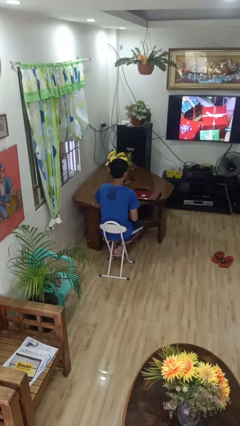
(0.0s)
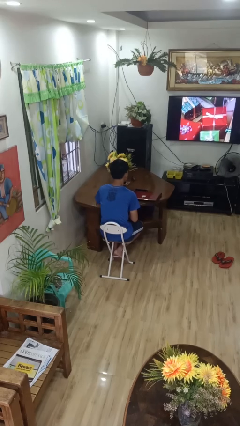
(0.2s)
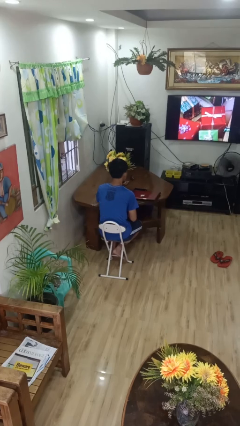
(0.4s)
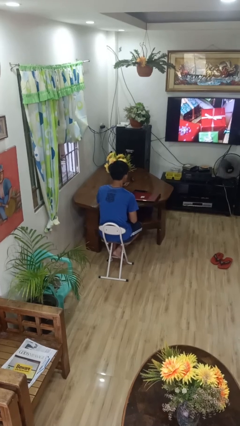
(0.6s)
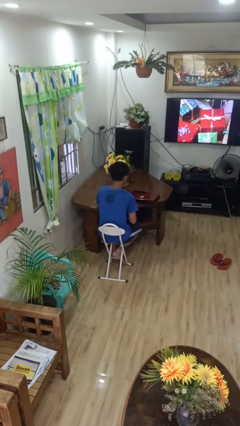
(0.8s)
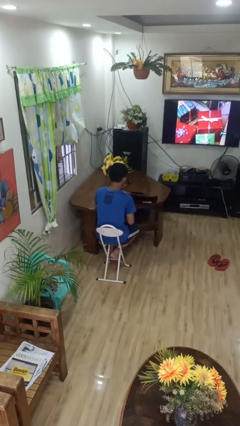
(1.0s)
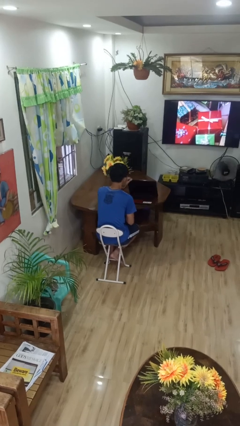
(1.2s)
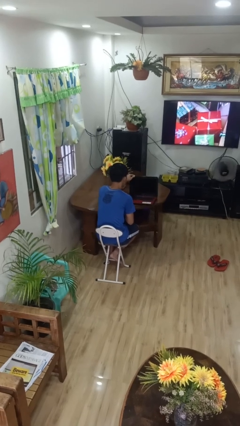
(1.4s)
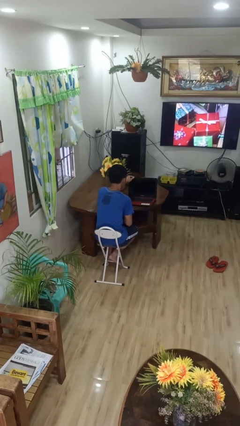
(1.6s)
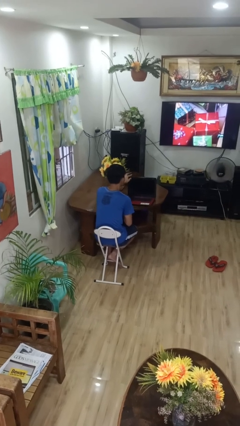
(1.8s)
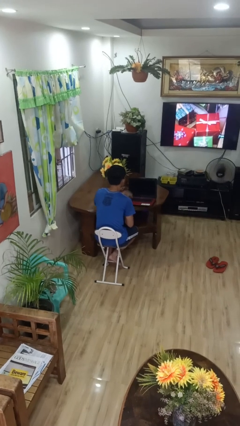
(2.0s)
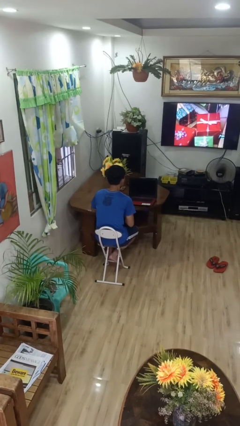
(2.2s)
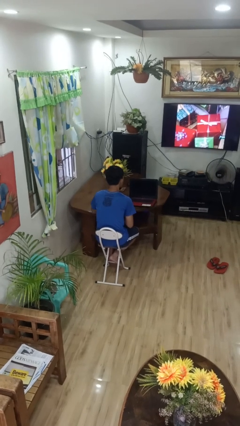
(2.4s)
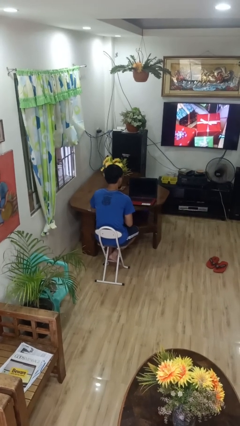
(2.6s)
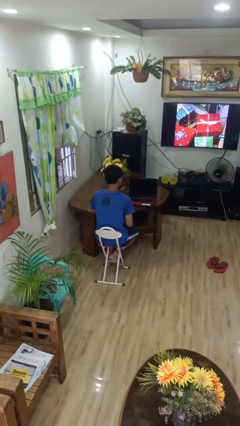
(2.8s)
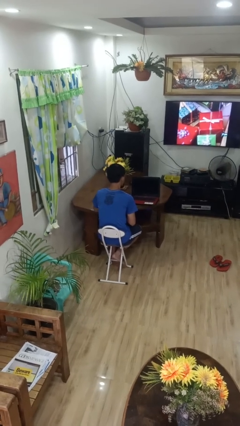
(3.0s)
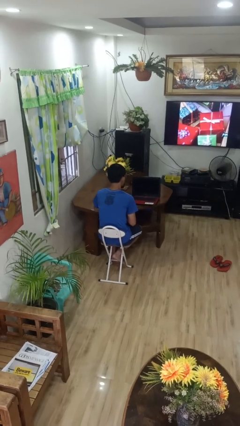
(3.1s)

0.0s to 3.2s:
person opens laptop

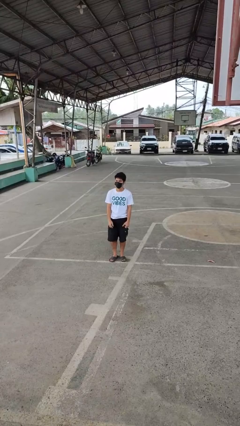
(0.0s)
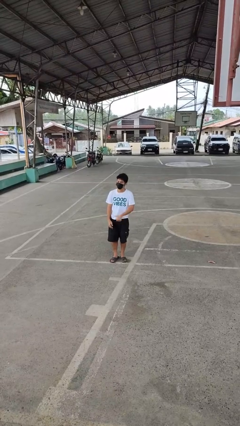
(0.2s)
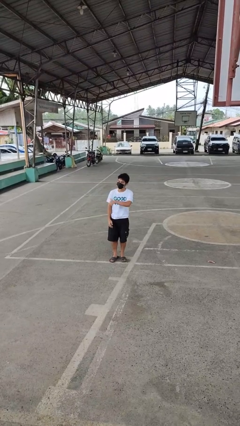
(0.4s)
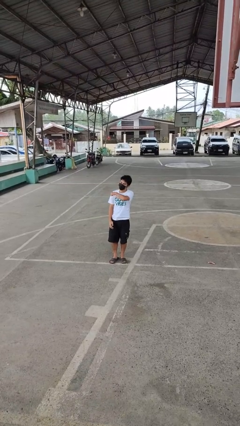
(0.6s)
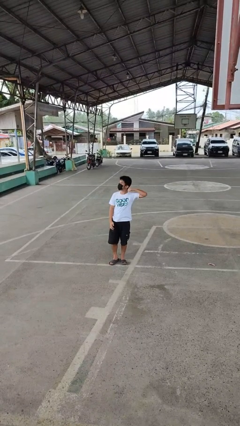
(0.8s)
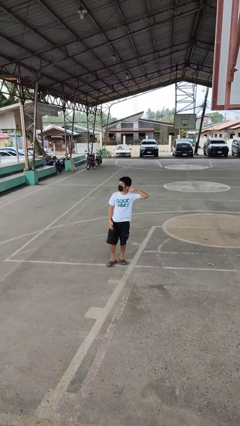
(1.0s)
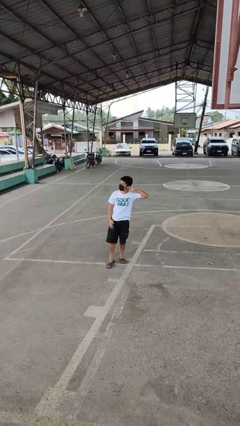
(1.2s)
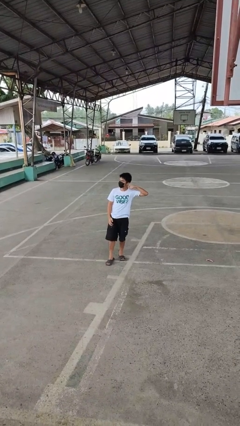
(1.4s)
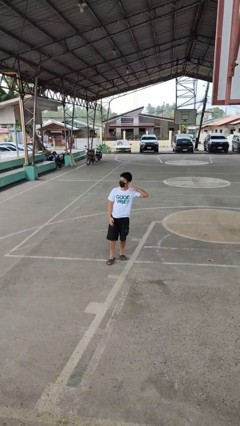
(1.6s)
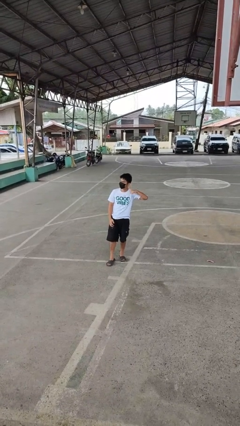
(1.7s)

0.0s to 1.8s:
person gestures cut

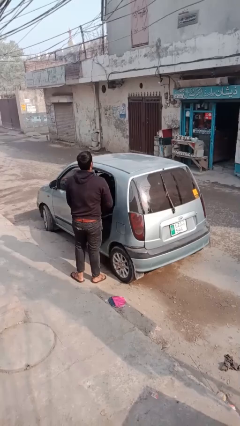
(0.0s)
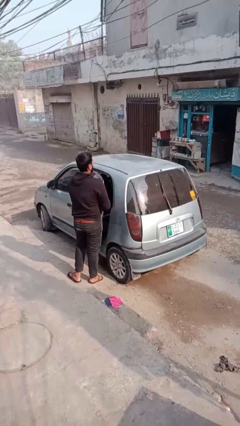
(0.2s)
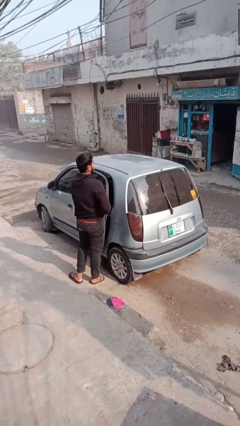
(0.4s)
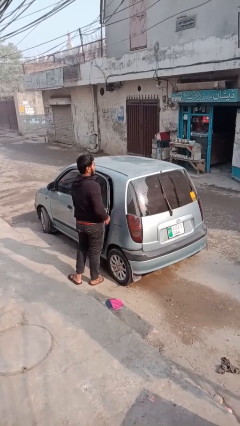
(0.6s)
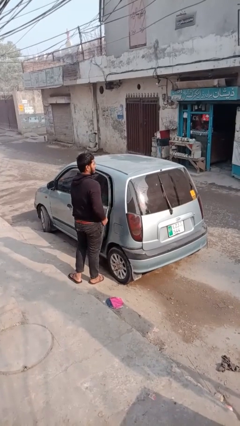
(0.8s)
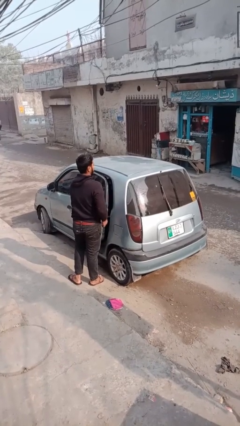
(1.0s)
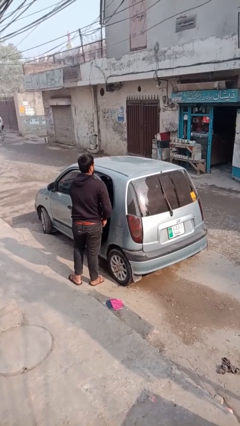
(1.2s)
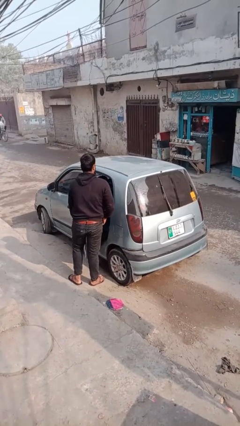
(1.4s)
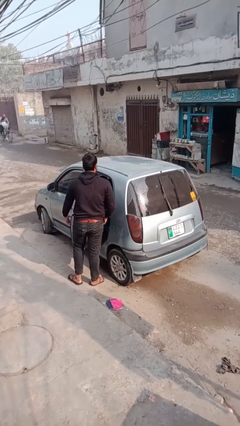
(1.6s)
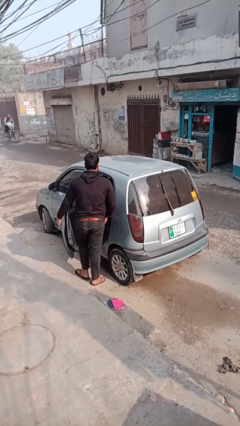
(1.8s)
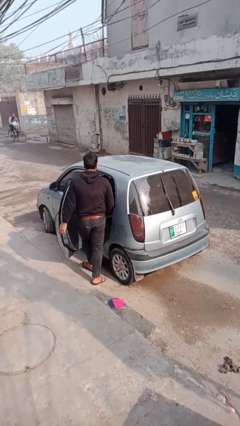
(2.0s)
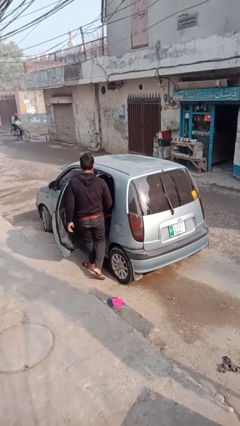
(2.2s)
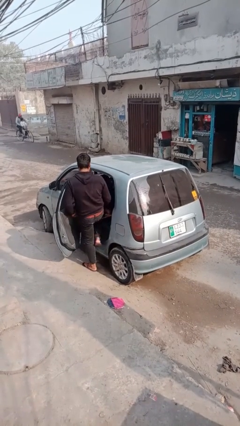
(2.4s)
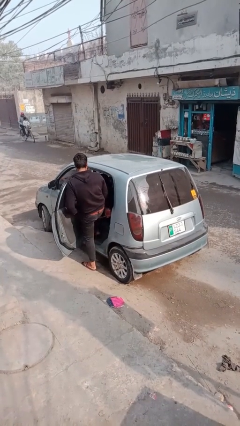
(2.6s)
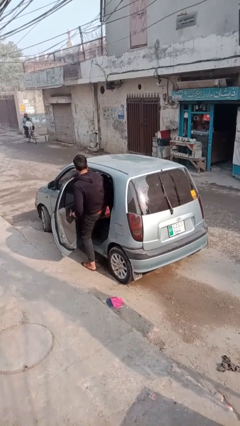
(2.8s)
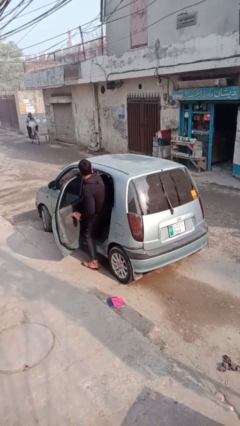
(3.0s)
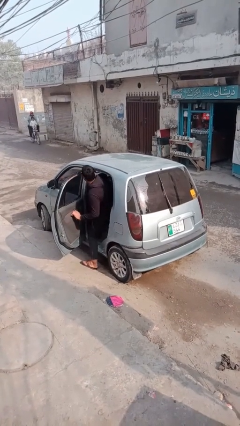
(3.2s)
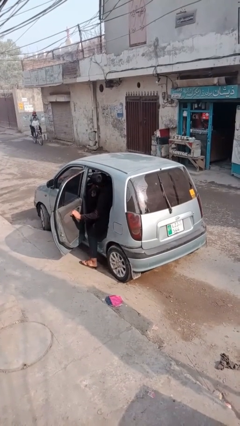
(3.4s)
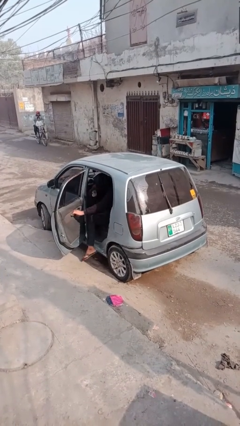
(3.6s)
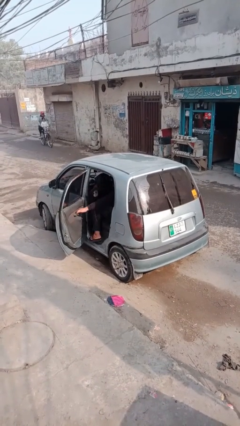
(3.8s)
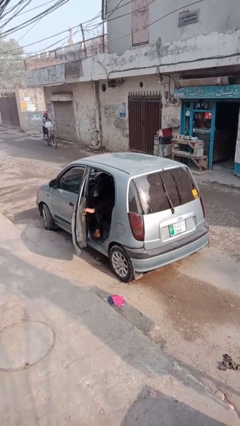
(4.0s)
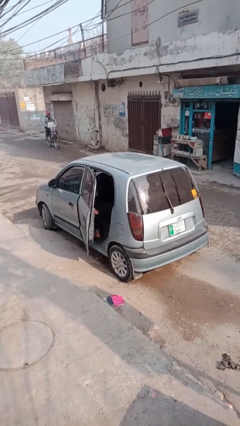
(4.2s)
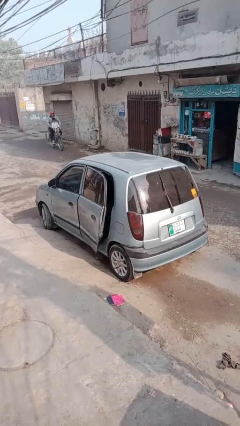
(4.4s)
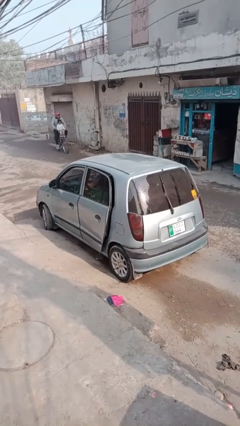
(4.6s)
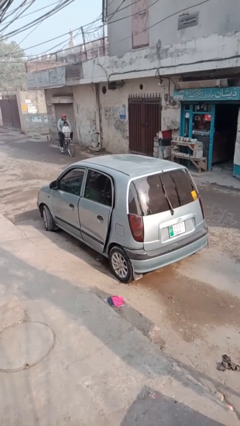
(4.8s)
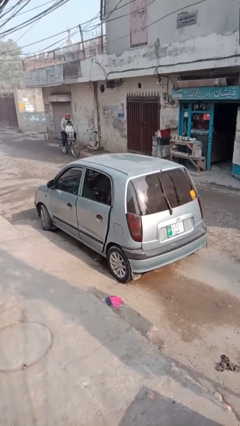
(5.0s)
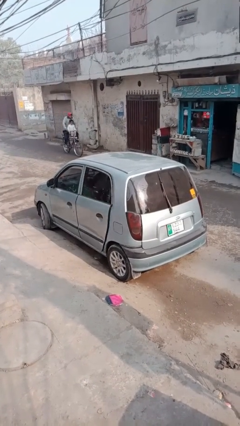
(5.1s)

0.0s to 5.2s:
car picks up person

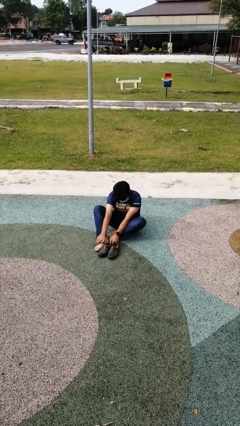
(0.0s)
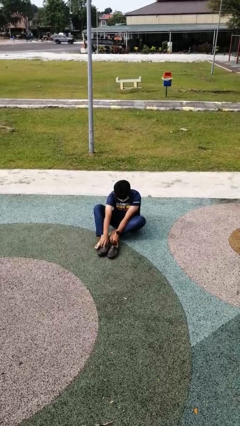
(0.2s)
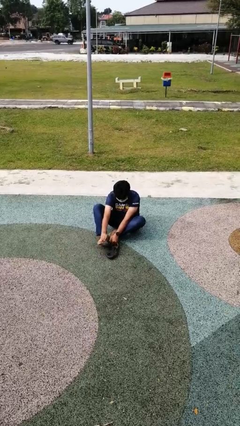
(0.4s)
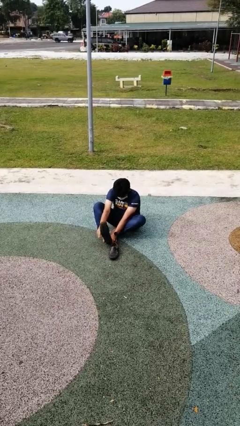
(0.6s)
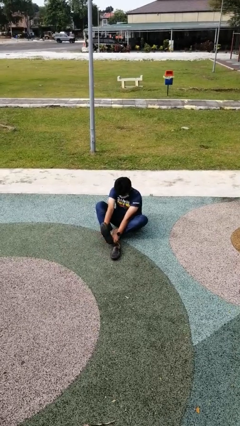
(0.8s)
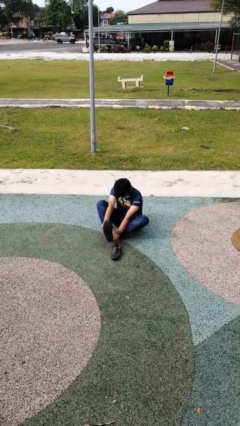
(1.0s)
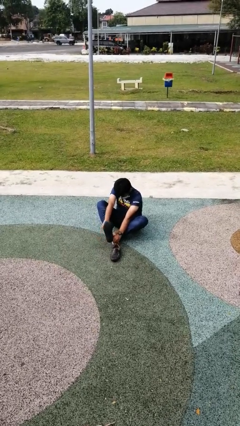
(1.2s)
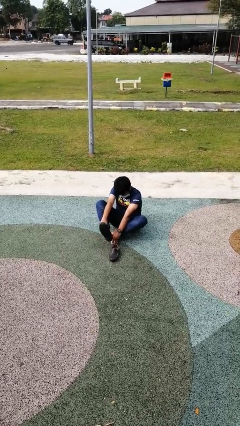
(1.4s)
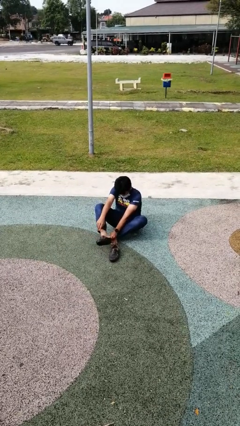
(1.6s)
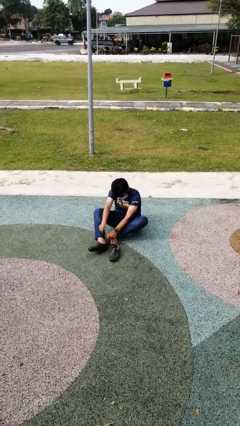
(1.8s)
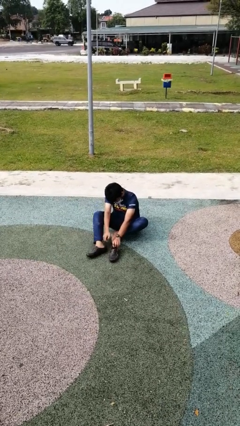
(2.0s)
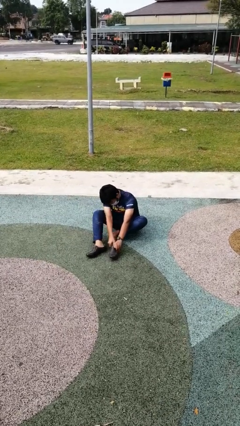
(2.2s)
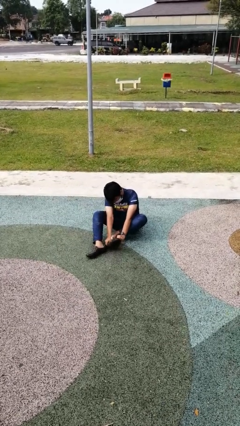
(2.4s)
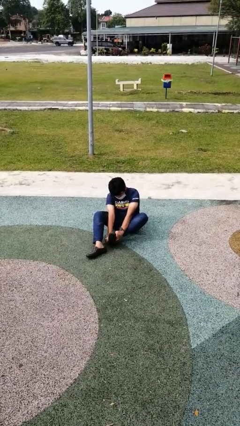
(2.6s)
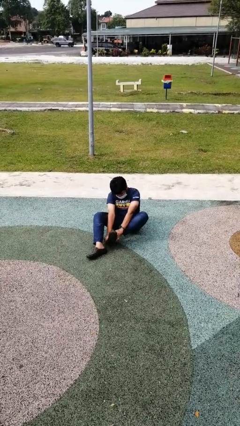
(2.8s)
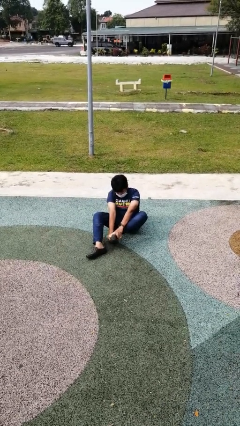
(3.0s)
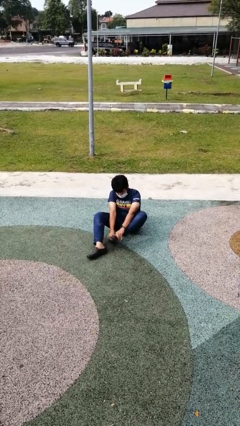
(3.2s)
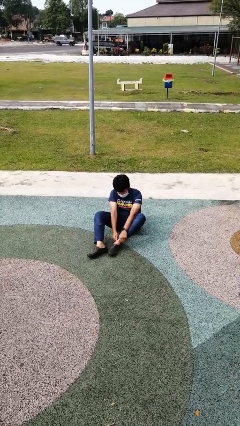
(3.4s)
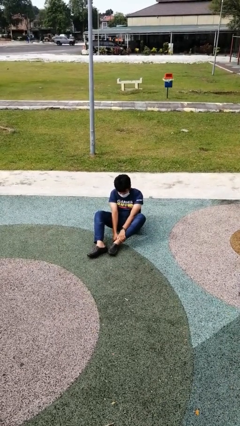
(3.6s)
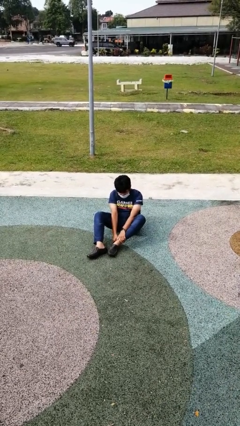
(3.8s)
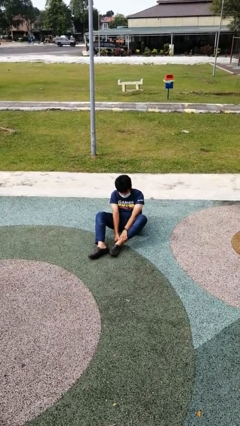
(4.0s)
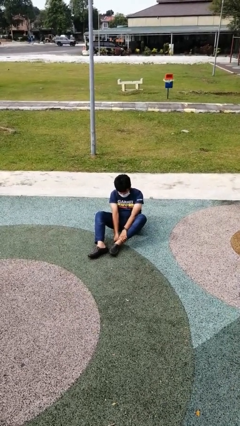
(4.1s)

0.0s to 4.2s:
person puts on shoes

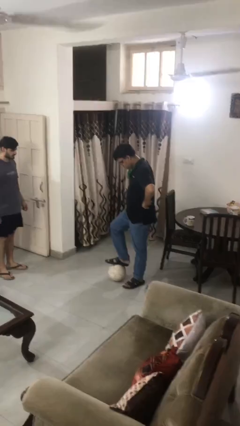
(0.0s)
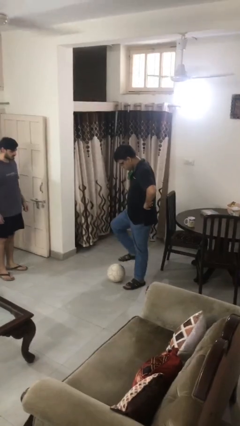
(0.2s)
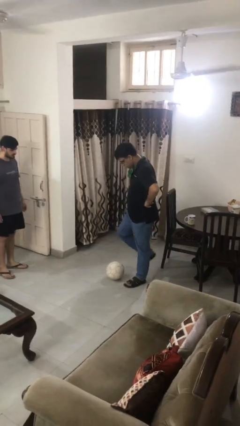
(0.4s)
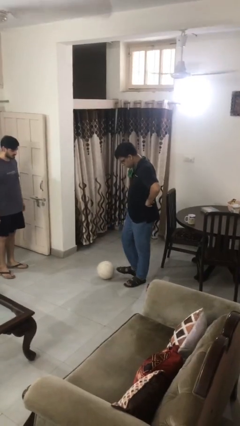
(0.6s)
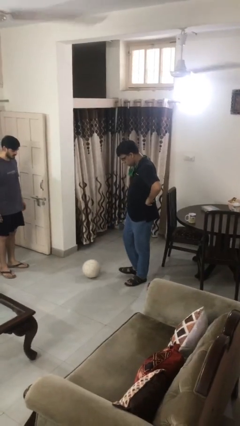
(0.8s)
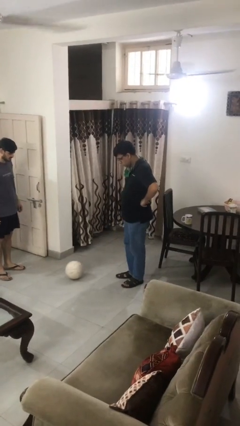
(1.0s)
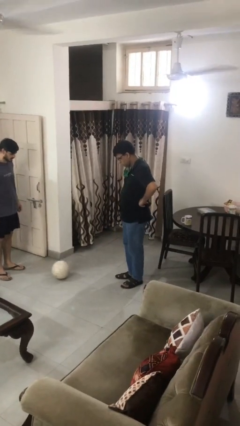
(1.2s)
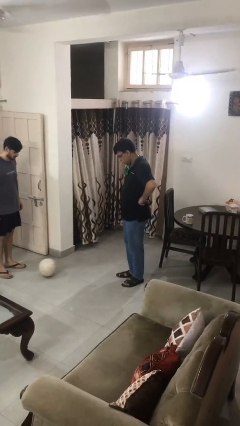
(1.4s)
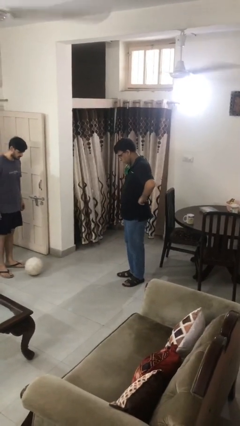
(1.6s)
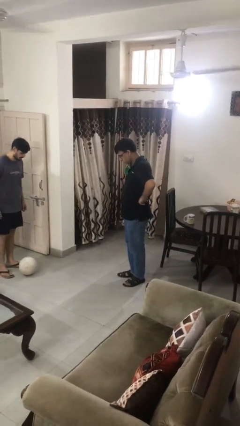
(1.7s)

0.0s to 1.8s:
person kicks object to person

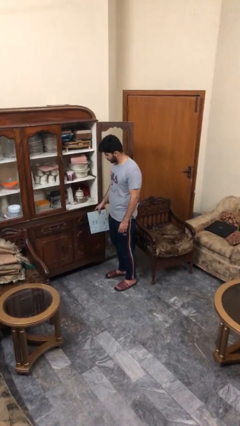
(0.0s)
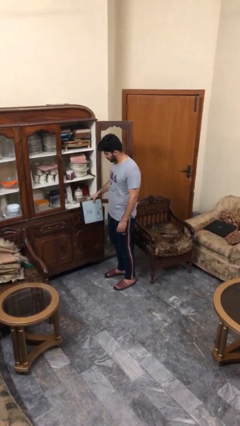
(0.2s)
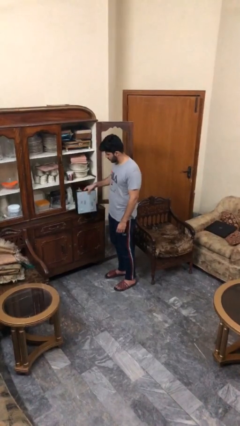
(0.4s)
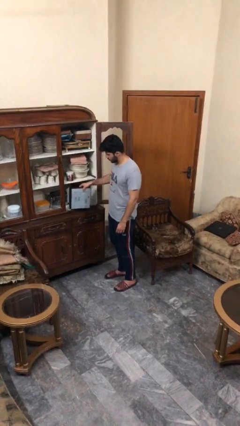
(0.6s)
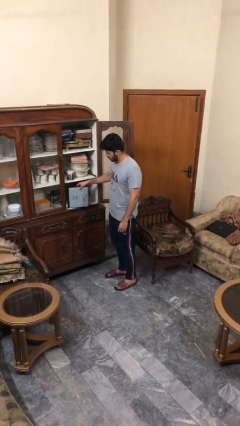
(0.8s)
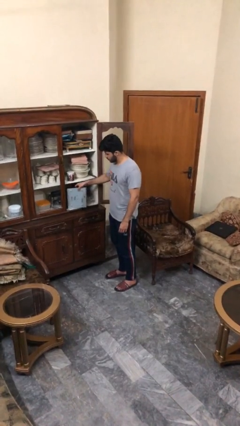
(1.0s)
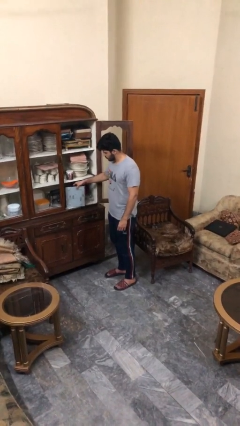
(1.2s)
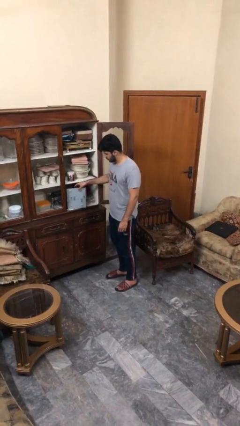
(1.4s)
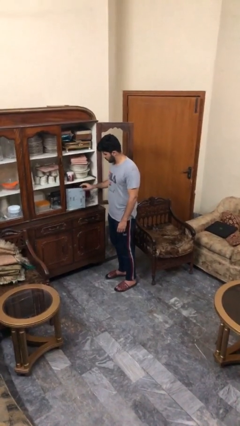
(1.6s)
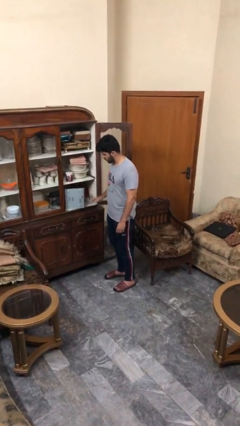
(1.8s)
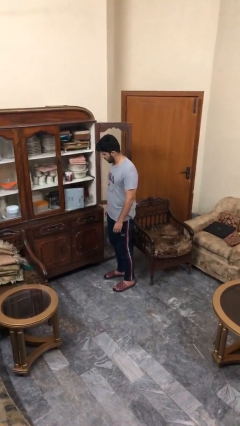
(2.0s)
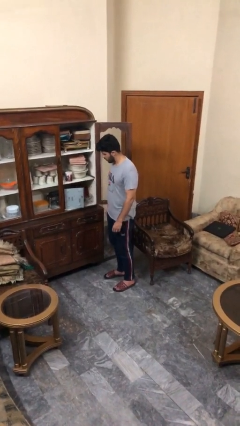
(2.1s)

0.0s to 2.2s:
person puts down object into cabinet
